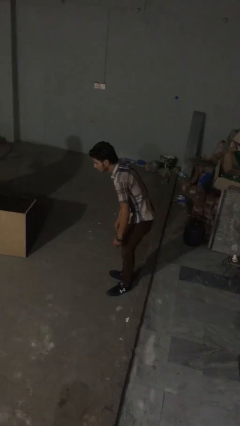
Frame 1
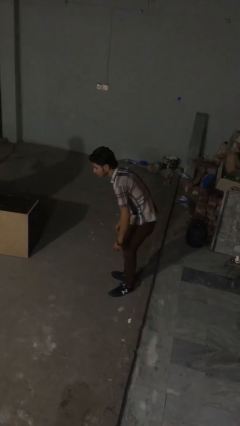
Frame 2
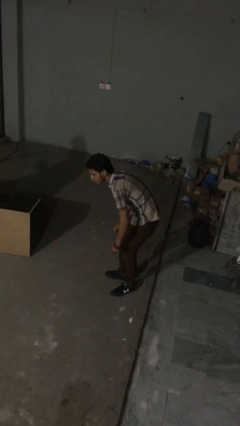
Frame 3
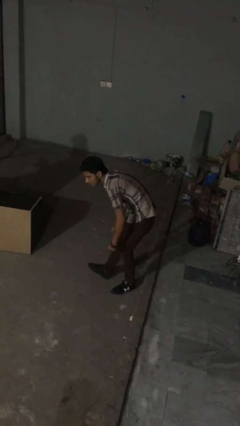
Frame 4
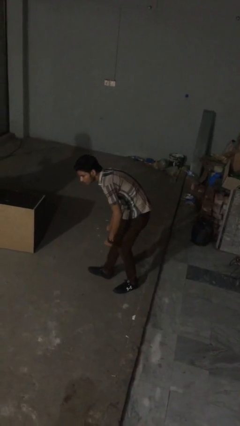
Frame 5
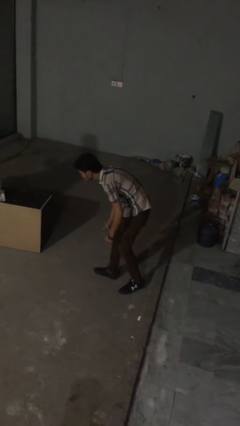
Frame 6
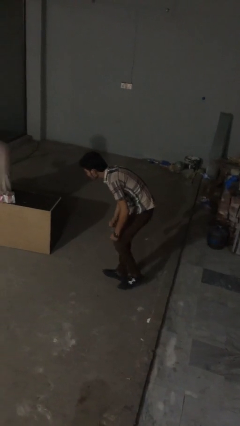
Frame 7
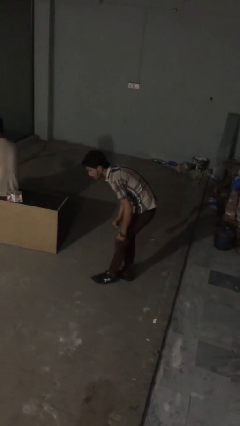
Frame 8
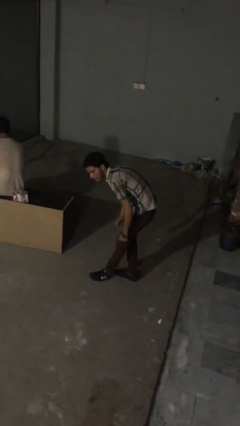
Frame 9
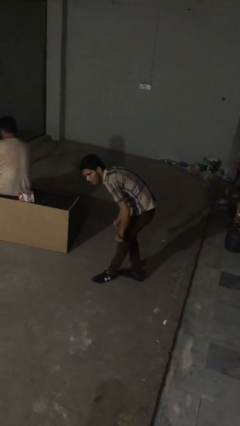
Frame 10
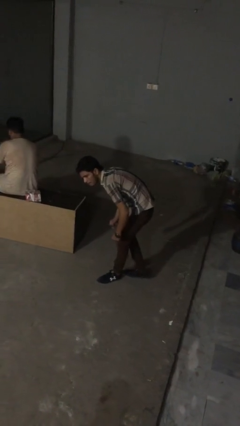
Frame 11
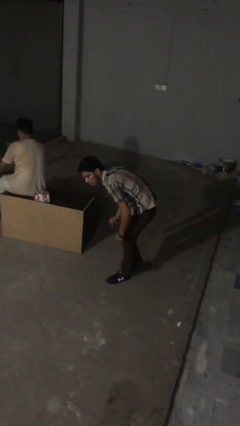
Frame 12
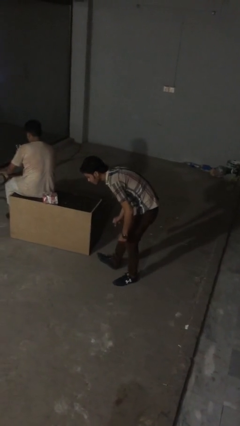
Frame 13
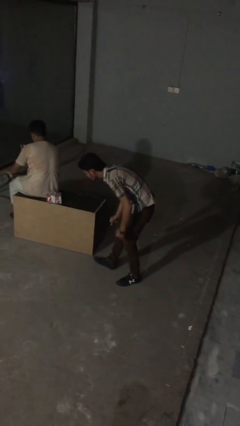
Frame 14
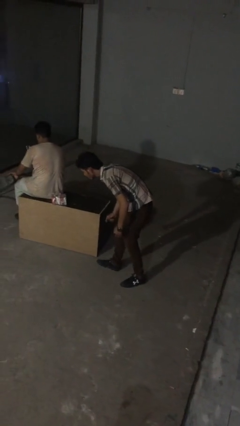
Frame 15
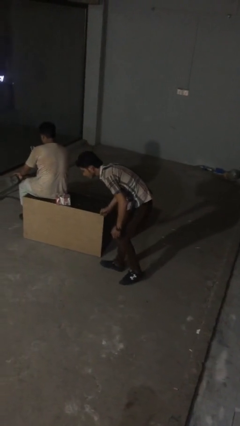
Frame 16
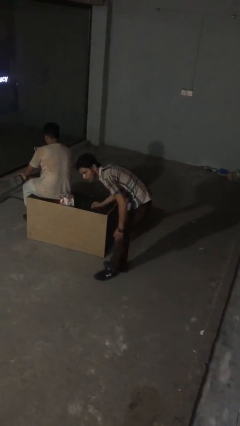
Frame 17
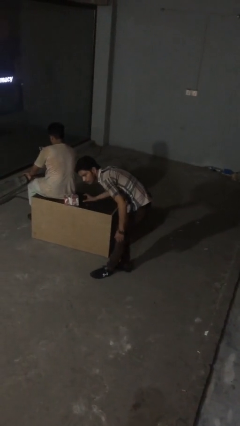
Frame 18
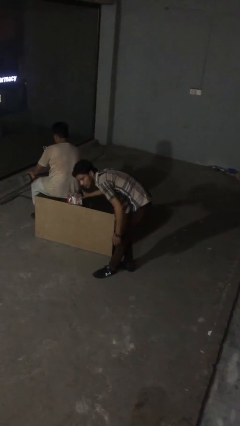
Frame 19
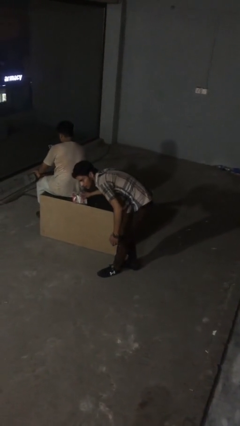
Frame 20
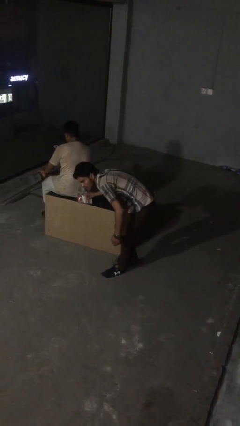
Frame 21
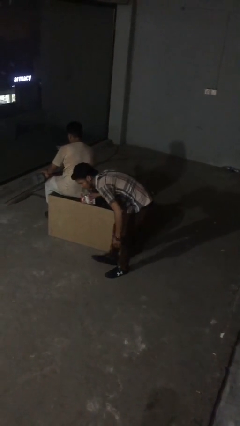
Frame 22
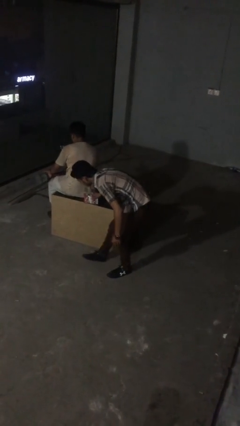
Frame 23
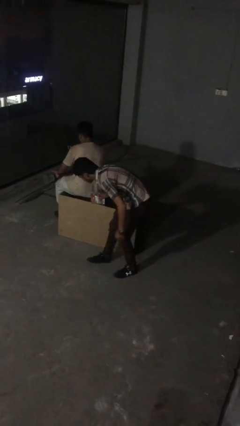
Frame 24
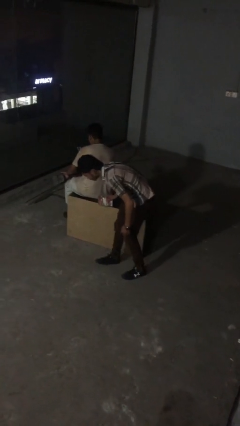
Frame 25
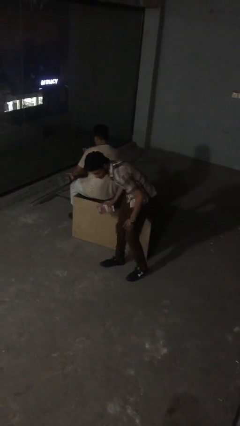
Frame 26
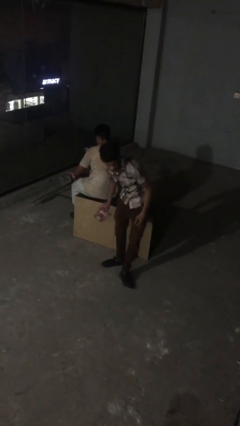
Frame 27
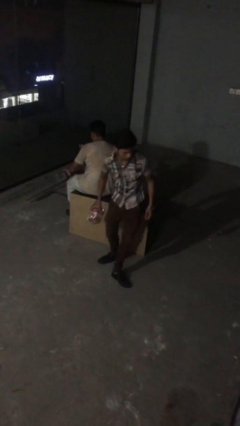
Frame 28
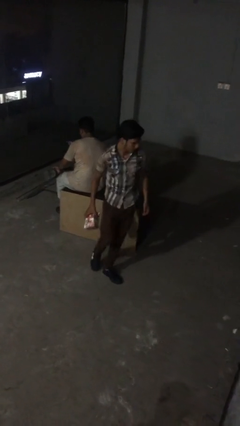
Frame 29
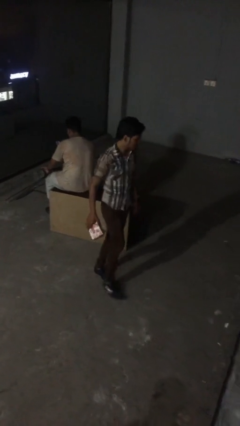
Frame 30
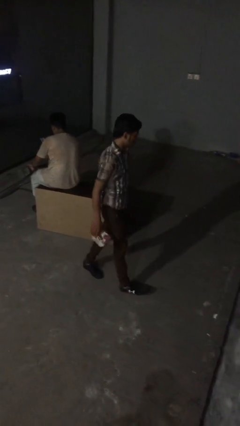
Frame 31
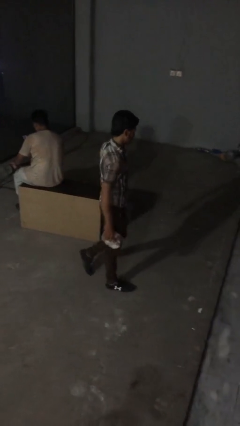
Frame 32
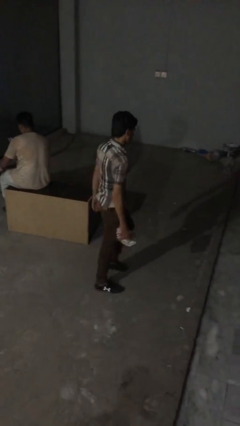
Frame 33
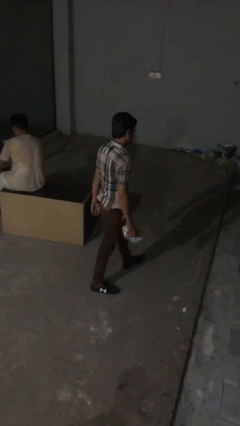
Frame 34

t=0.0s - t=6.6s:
person steals object from person

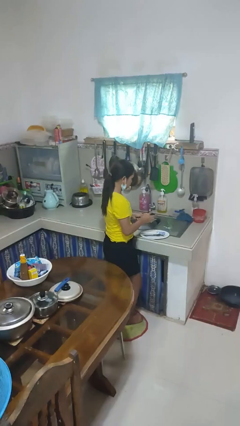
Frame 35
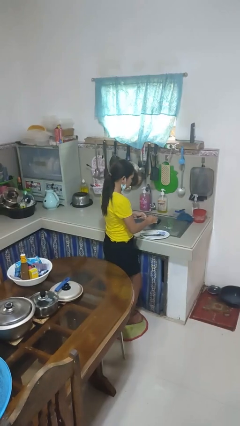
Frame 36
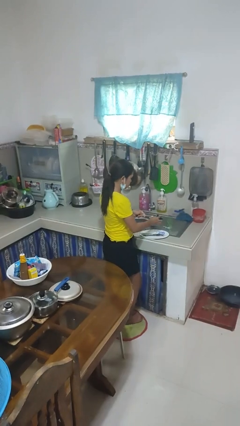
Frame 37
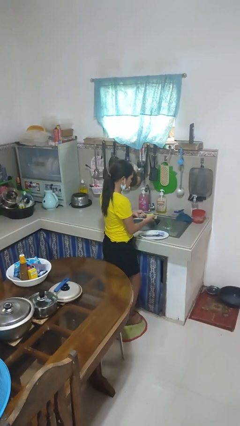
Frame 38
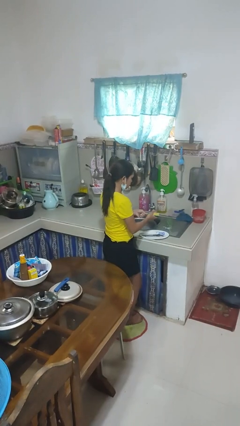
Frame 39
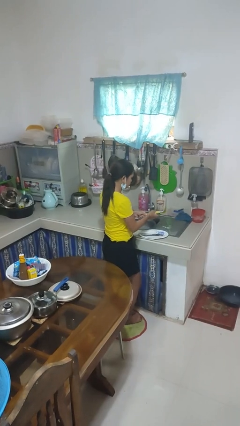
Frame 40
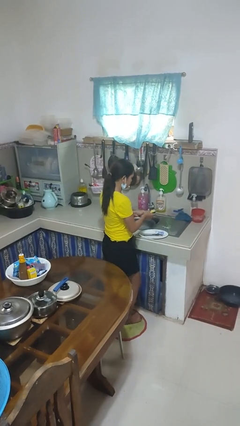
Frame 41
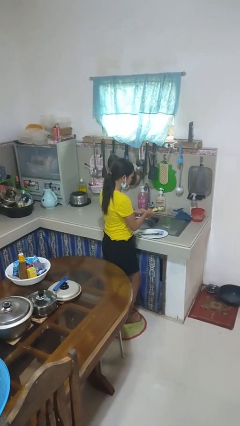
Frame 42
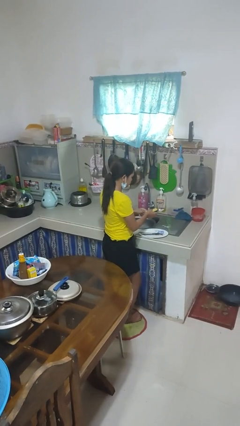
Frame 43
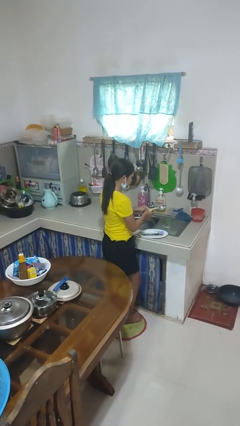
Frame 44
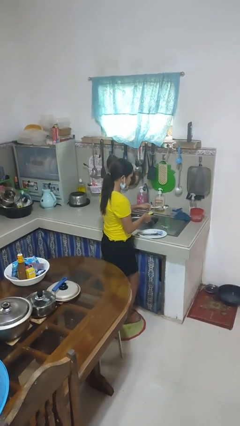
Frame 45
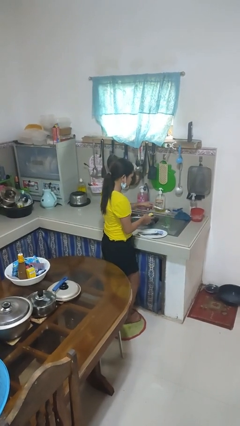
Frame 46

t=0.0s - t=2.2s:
person washes dish

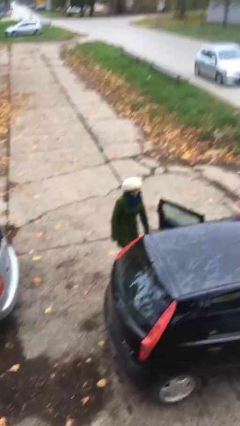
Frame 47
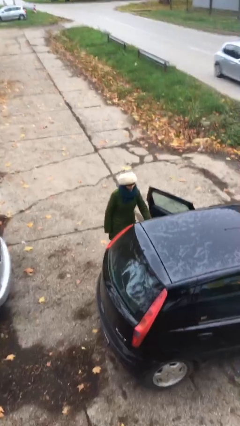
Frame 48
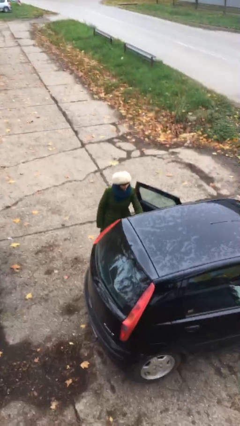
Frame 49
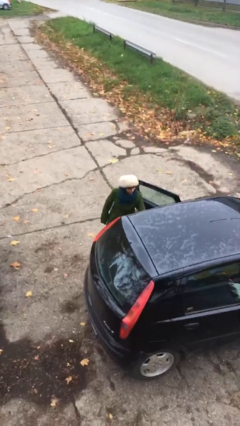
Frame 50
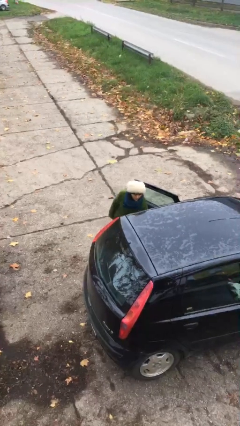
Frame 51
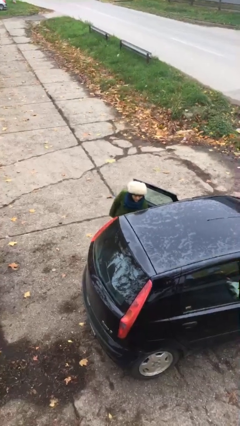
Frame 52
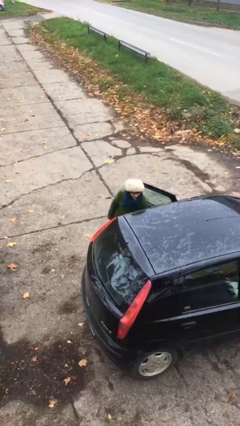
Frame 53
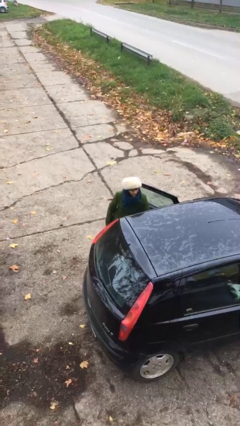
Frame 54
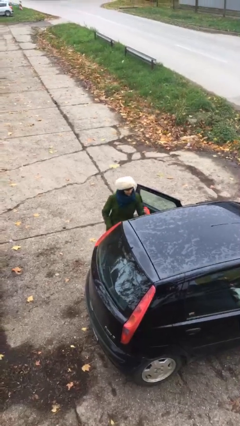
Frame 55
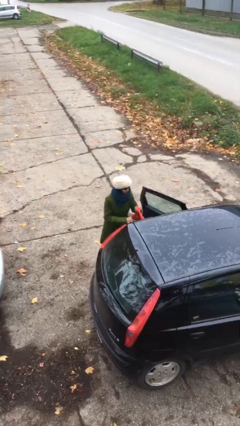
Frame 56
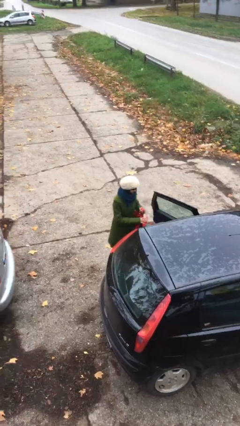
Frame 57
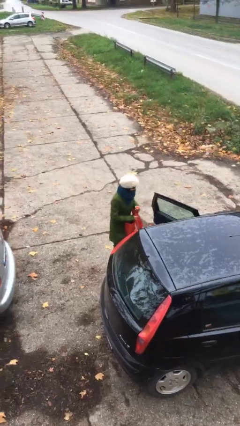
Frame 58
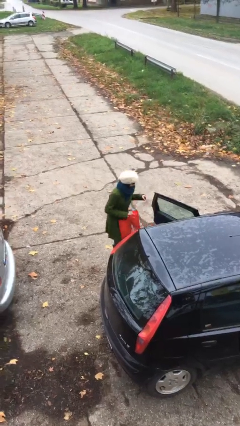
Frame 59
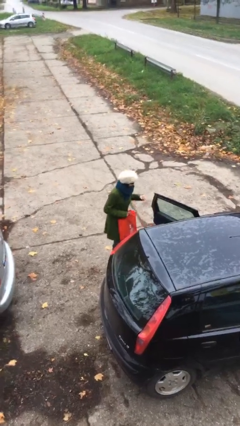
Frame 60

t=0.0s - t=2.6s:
person unloads car

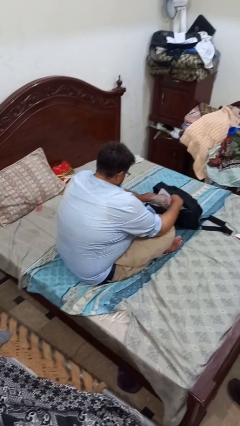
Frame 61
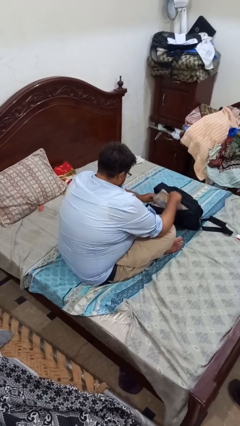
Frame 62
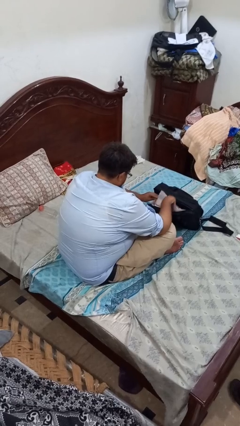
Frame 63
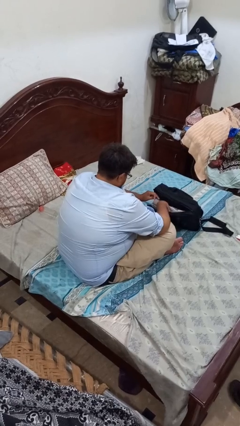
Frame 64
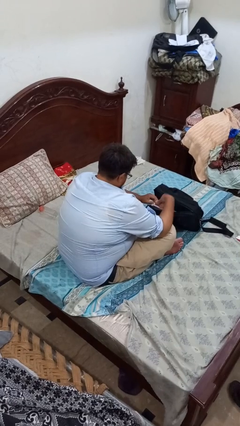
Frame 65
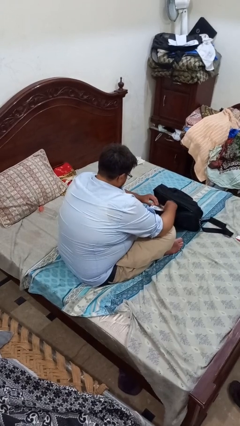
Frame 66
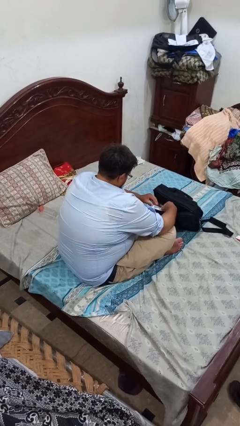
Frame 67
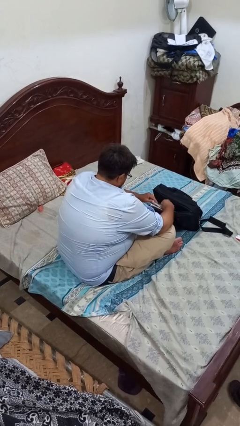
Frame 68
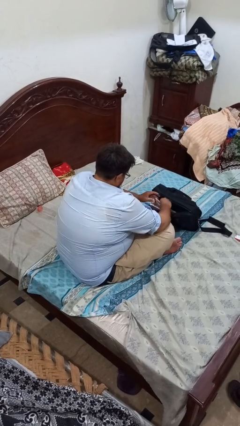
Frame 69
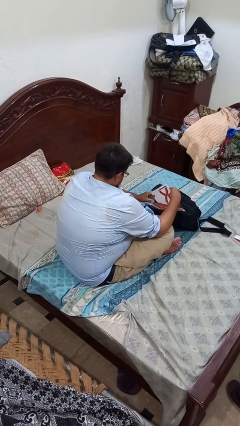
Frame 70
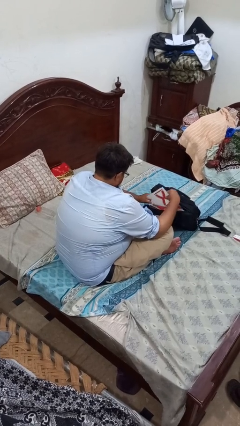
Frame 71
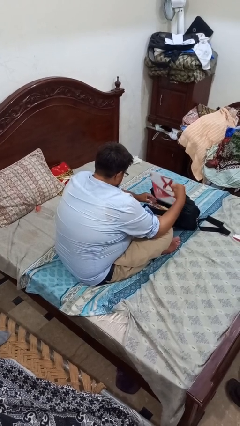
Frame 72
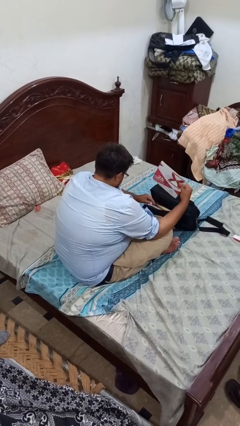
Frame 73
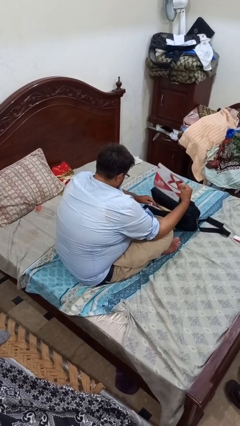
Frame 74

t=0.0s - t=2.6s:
person searches in bag

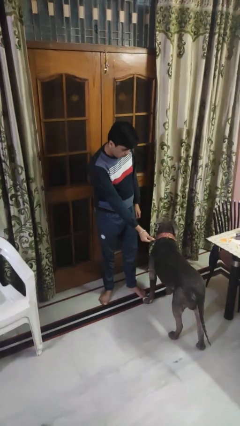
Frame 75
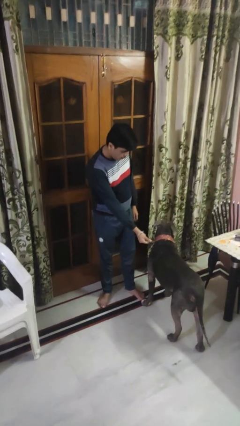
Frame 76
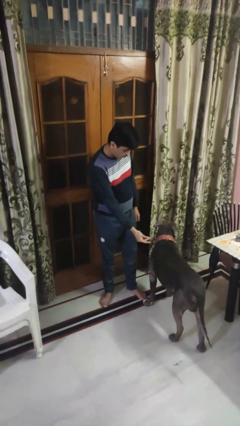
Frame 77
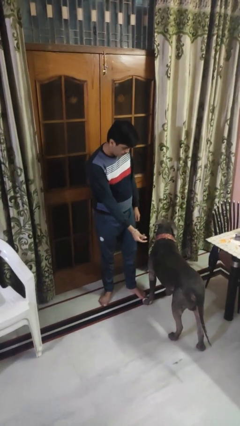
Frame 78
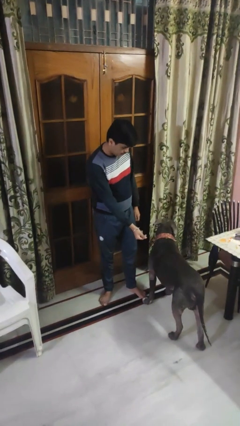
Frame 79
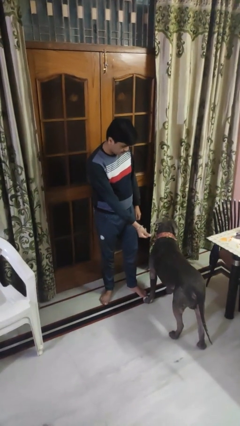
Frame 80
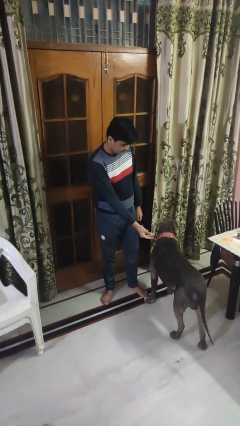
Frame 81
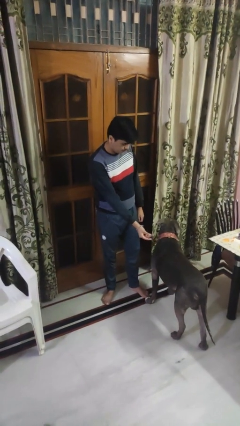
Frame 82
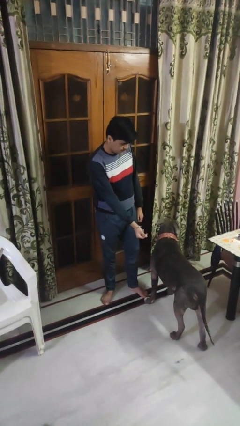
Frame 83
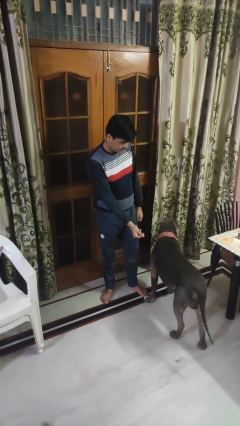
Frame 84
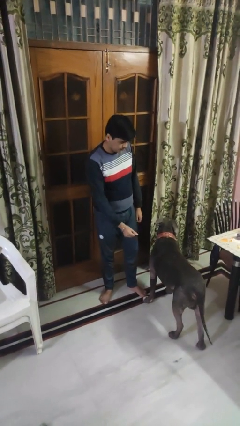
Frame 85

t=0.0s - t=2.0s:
person points to dog

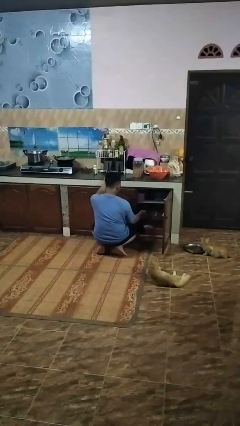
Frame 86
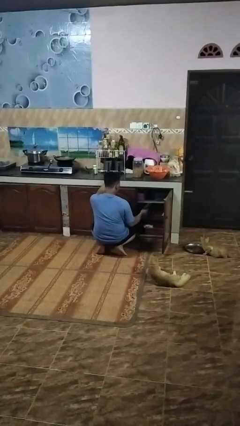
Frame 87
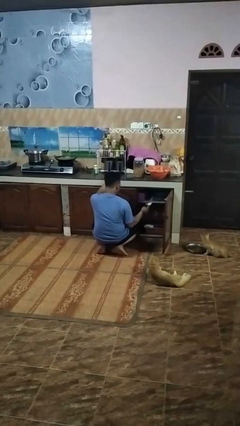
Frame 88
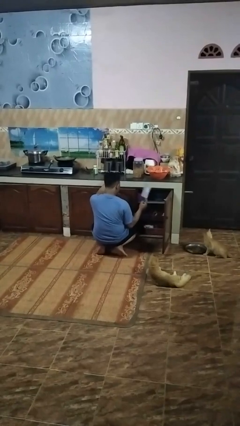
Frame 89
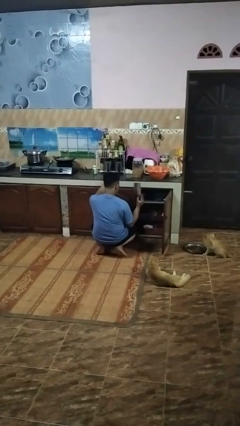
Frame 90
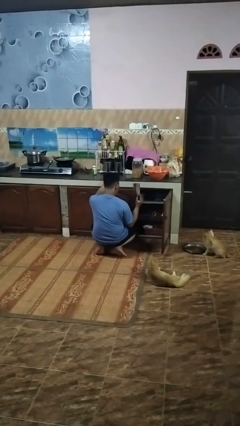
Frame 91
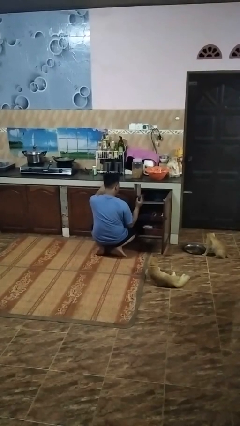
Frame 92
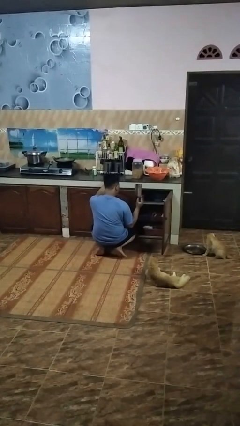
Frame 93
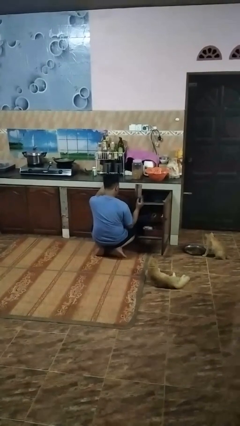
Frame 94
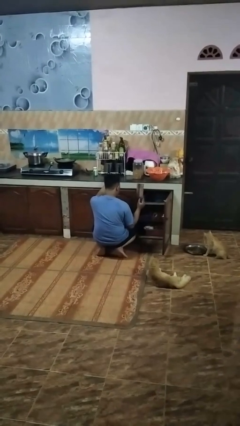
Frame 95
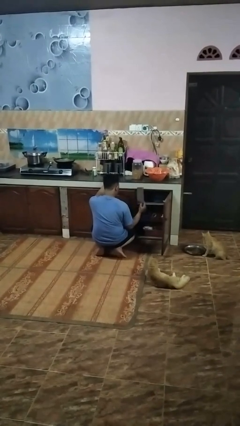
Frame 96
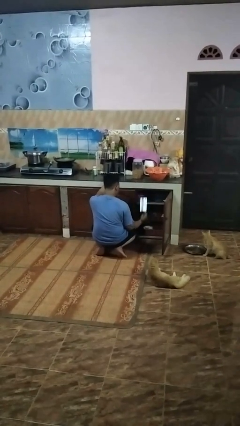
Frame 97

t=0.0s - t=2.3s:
person takes object from kitchen drawer
